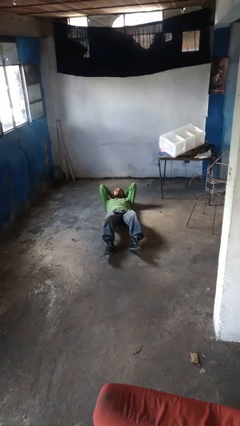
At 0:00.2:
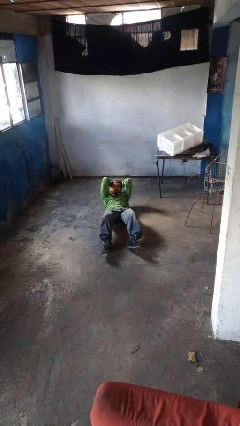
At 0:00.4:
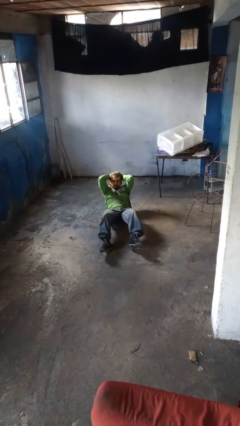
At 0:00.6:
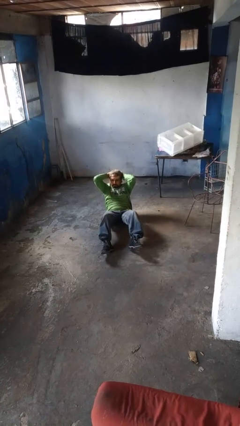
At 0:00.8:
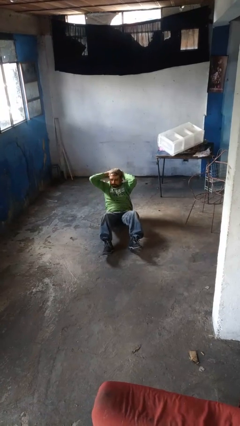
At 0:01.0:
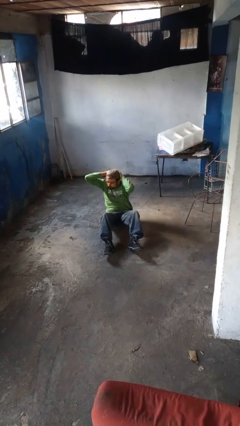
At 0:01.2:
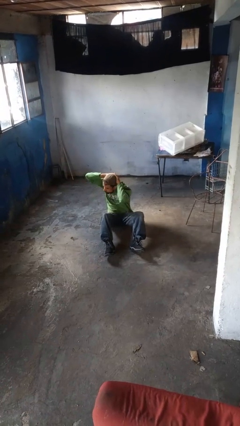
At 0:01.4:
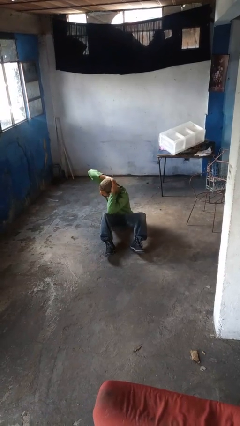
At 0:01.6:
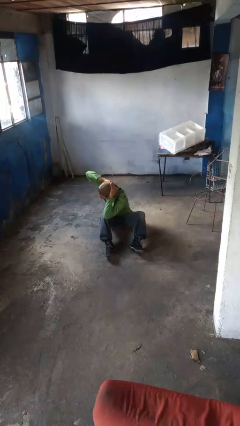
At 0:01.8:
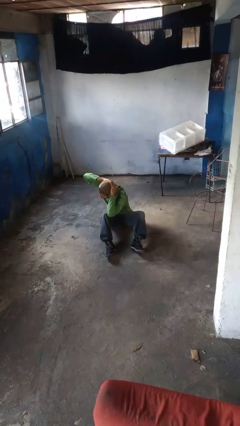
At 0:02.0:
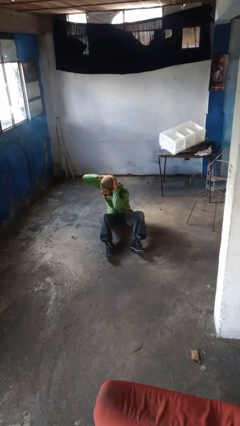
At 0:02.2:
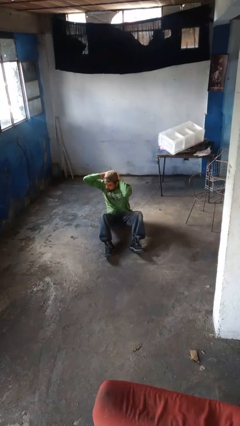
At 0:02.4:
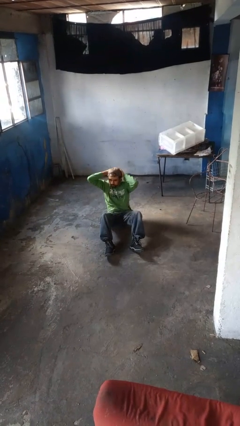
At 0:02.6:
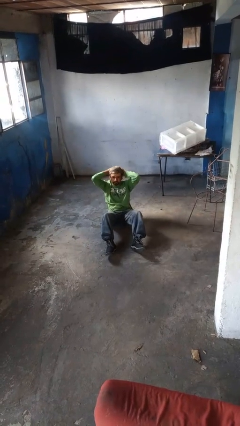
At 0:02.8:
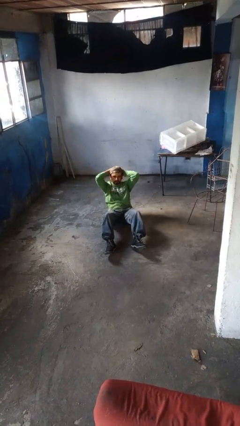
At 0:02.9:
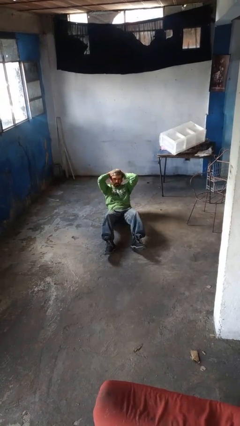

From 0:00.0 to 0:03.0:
person exercises with situp

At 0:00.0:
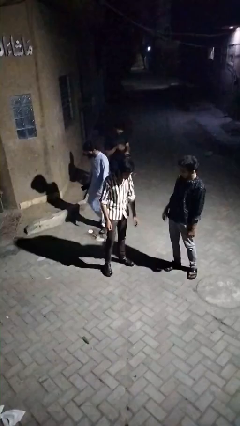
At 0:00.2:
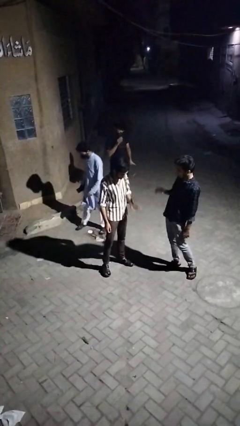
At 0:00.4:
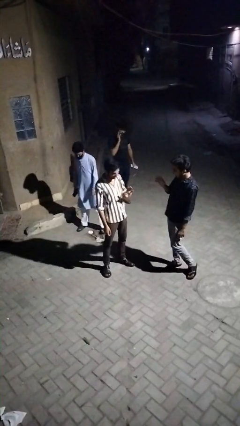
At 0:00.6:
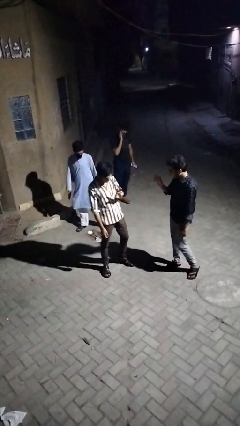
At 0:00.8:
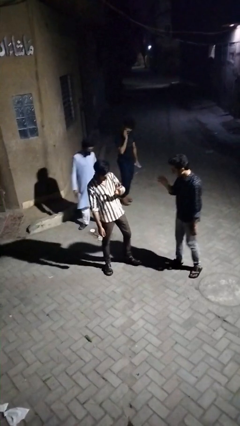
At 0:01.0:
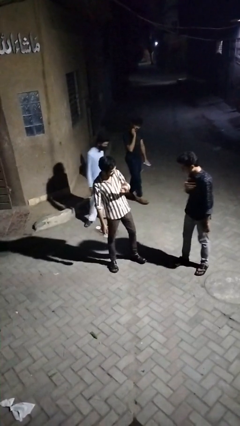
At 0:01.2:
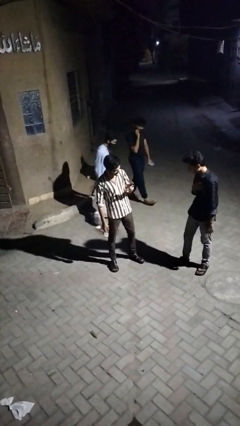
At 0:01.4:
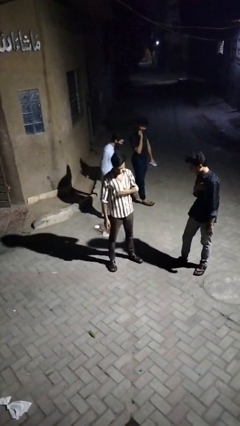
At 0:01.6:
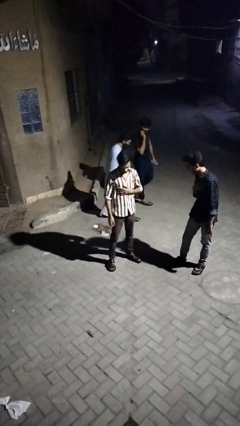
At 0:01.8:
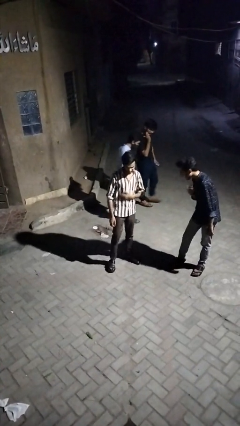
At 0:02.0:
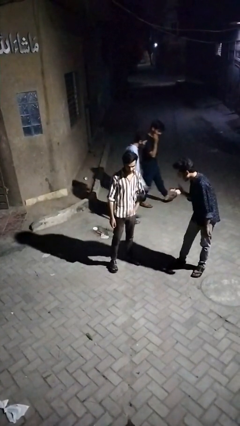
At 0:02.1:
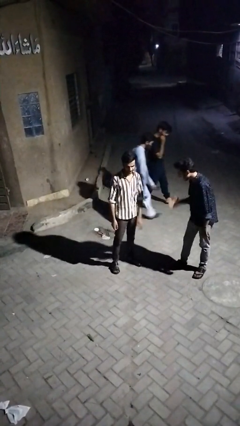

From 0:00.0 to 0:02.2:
person laughs with person

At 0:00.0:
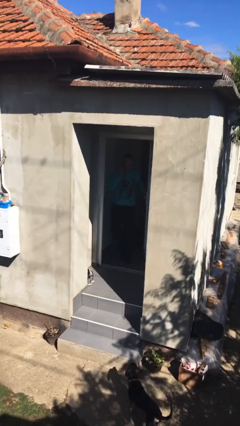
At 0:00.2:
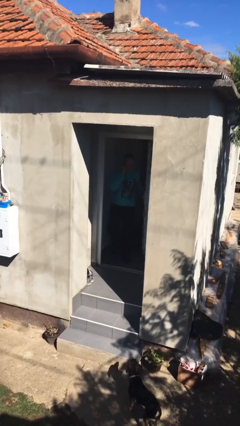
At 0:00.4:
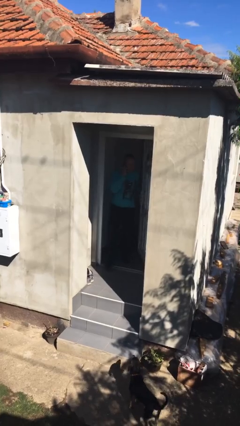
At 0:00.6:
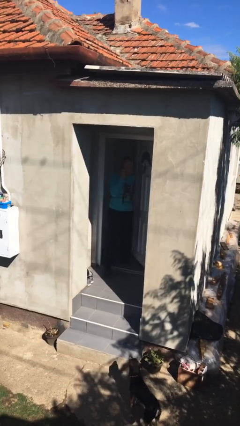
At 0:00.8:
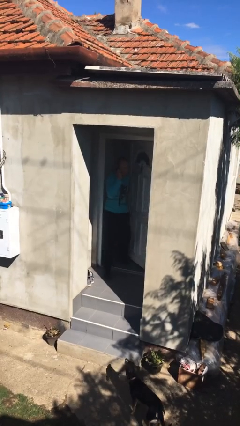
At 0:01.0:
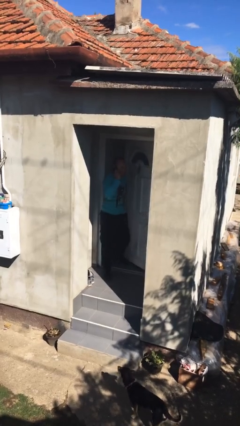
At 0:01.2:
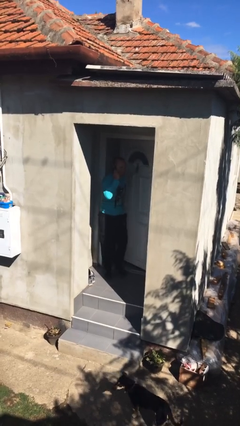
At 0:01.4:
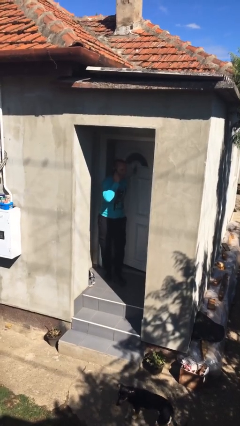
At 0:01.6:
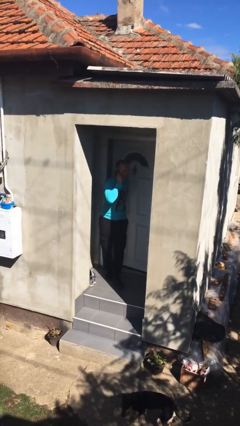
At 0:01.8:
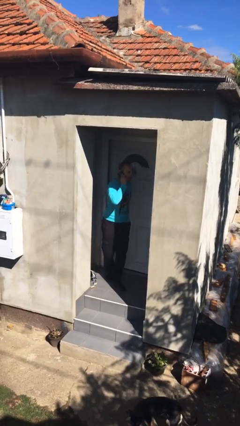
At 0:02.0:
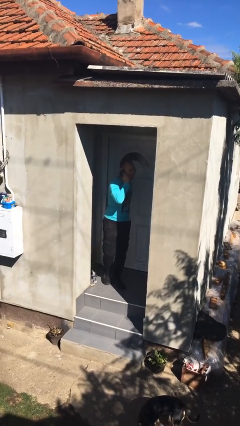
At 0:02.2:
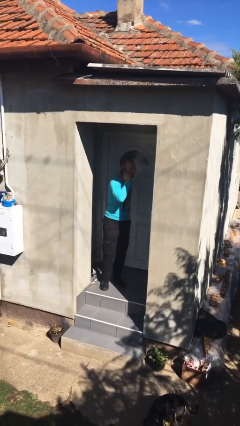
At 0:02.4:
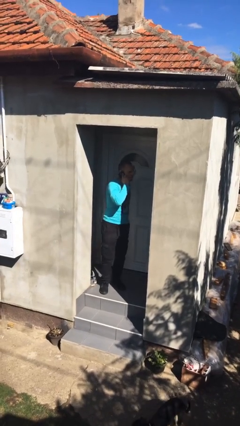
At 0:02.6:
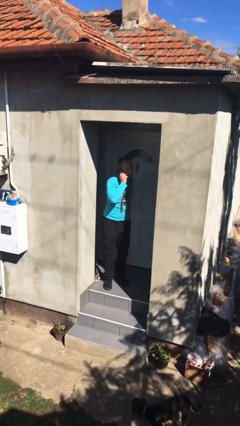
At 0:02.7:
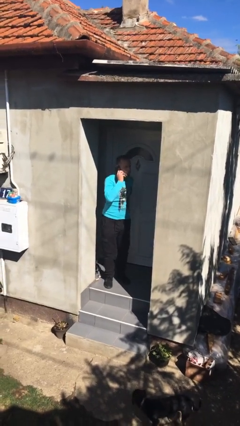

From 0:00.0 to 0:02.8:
person enters scene through structure

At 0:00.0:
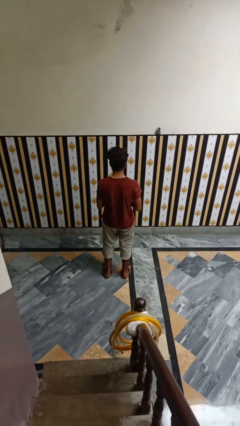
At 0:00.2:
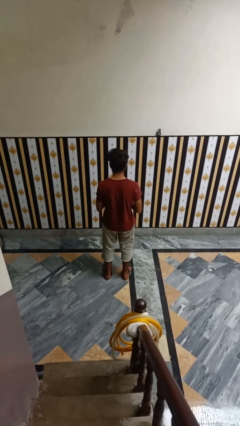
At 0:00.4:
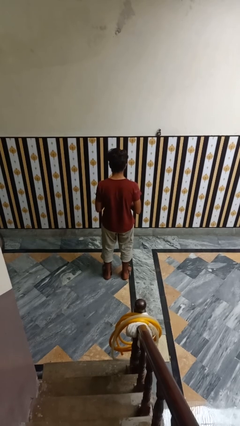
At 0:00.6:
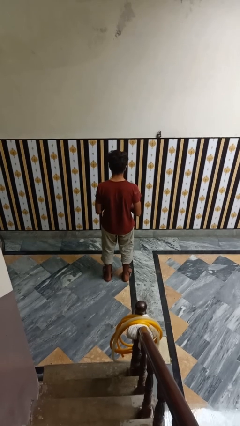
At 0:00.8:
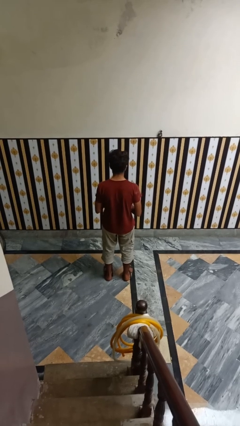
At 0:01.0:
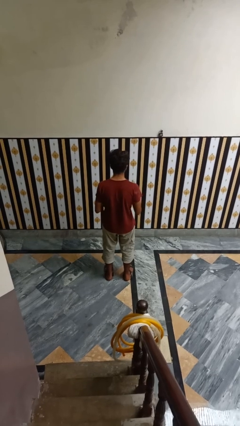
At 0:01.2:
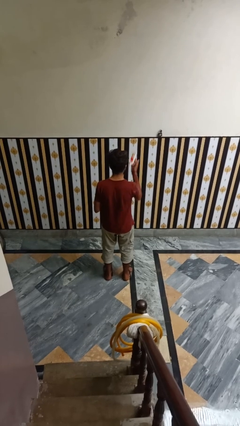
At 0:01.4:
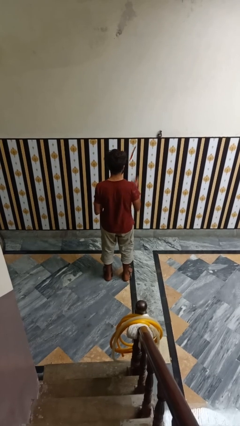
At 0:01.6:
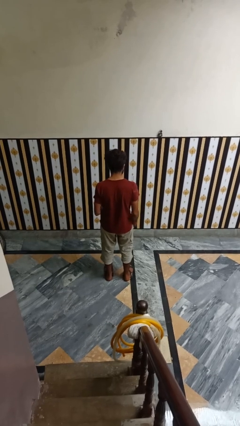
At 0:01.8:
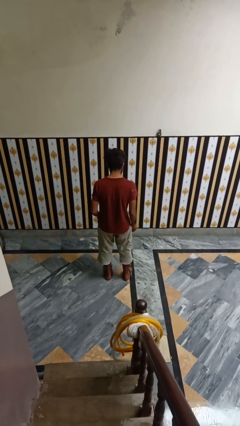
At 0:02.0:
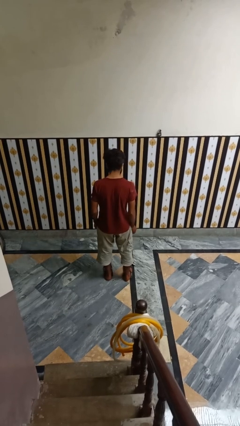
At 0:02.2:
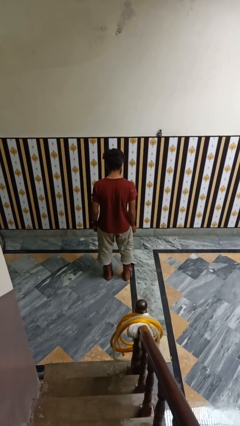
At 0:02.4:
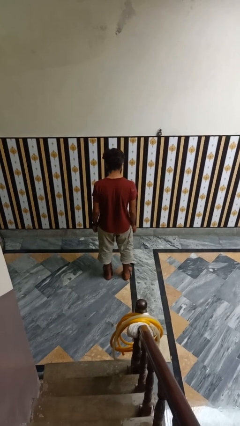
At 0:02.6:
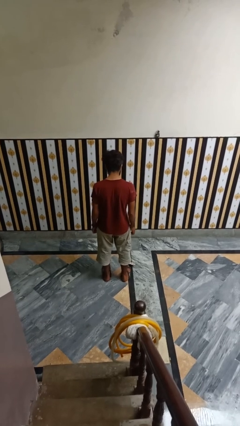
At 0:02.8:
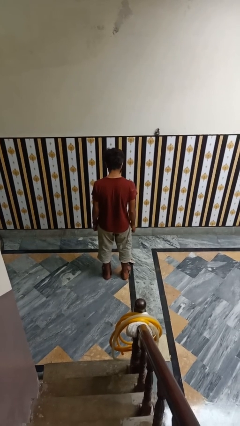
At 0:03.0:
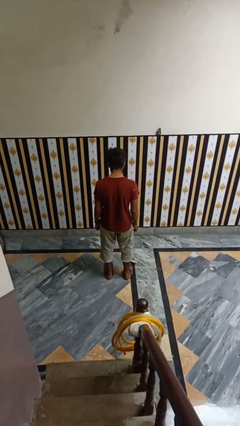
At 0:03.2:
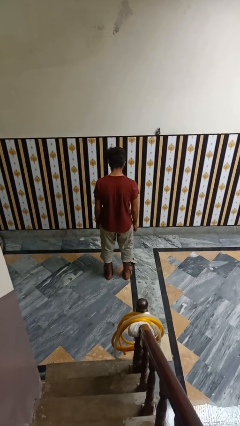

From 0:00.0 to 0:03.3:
person throws object into air

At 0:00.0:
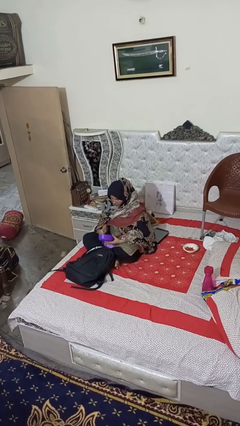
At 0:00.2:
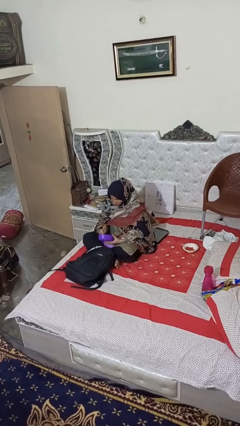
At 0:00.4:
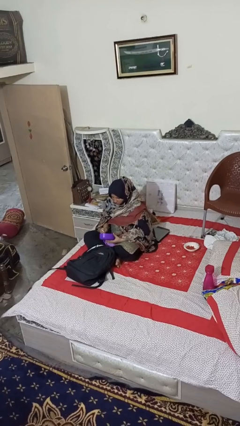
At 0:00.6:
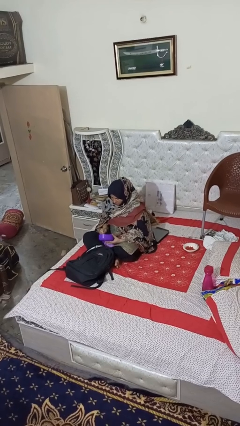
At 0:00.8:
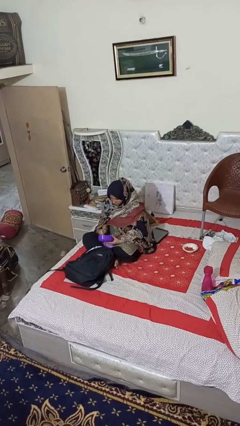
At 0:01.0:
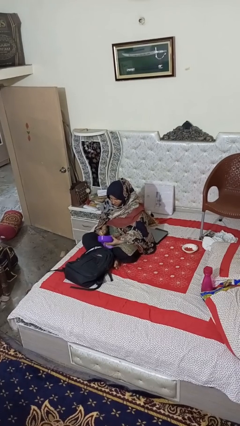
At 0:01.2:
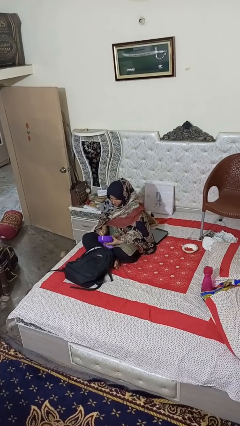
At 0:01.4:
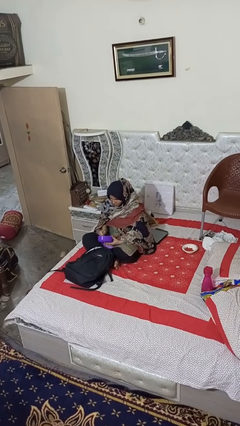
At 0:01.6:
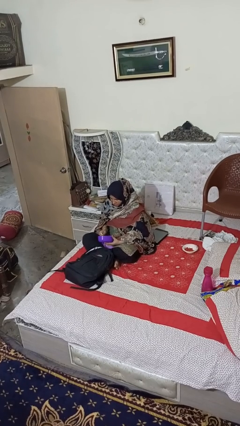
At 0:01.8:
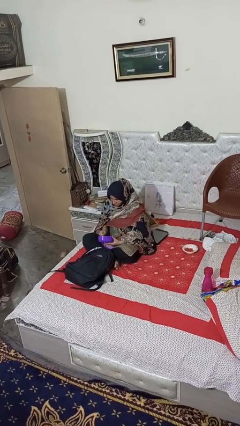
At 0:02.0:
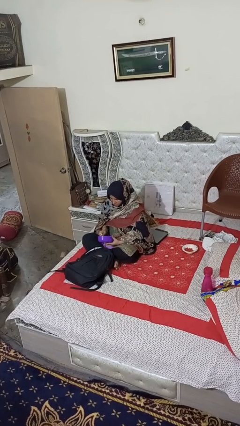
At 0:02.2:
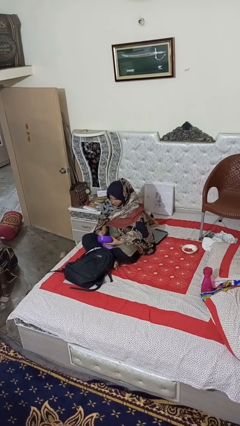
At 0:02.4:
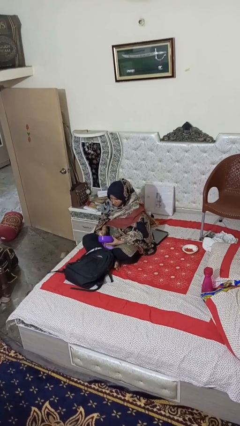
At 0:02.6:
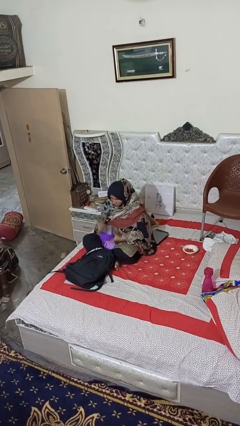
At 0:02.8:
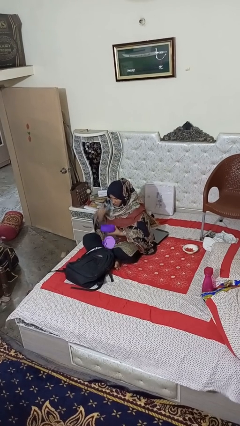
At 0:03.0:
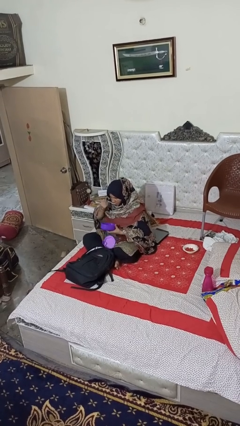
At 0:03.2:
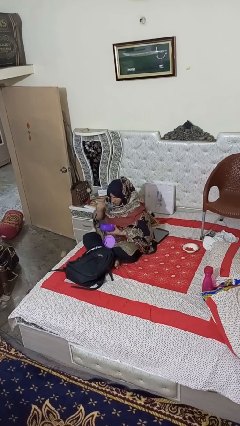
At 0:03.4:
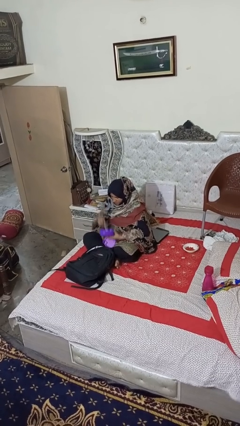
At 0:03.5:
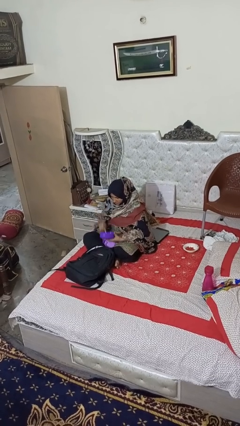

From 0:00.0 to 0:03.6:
person eats snack from bag

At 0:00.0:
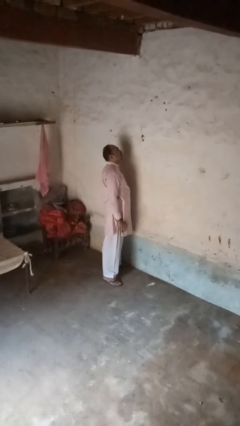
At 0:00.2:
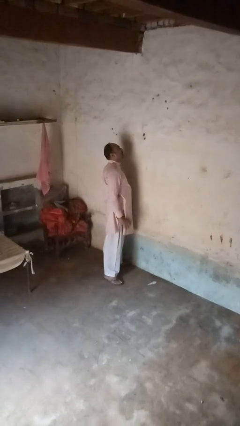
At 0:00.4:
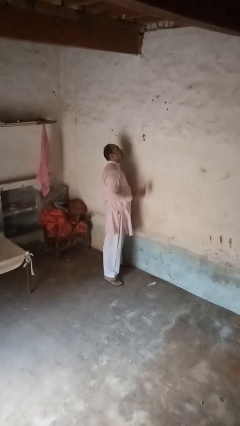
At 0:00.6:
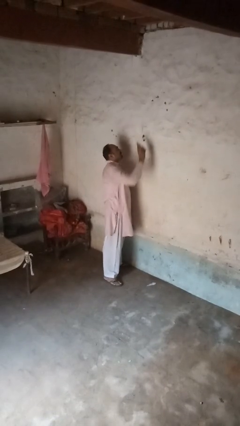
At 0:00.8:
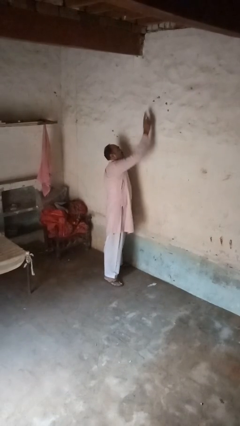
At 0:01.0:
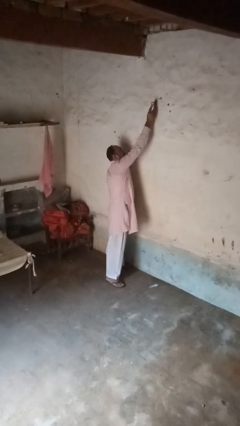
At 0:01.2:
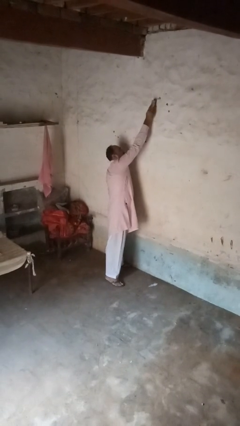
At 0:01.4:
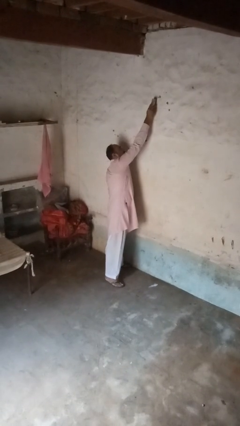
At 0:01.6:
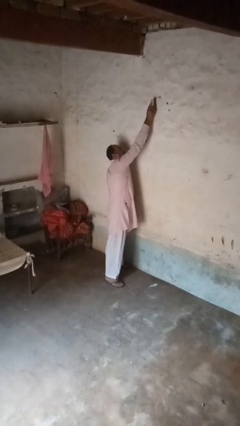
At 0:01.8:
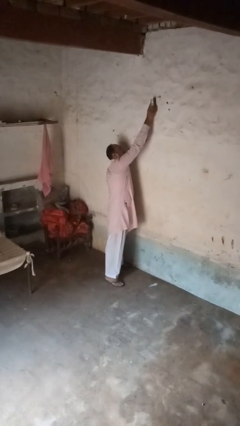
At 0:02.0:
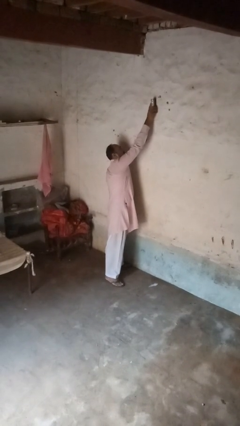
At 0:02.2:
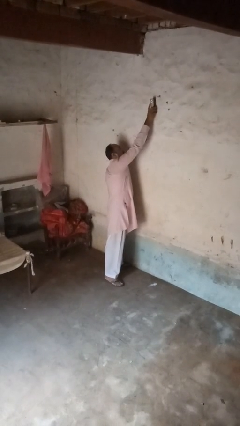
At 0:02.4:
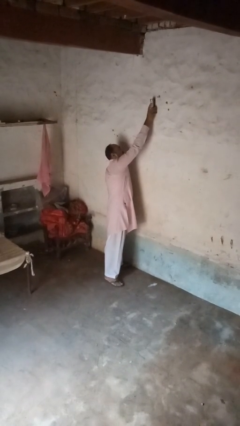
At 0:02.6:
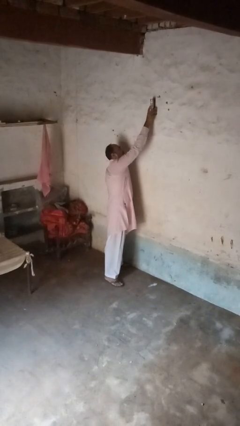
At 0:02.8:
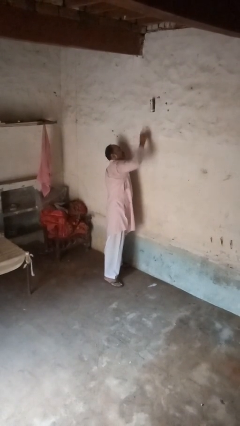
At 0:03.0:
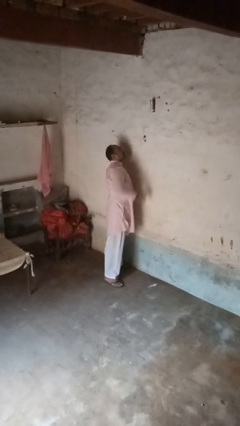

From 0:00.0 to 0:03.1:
person adjusts thermostat
